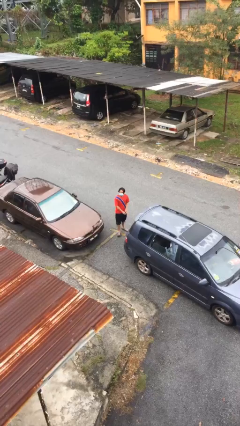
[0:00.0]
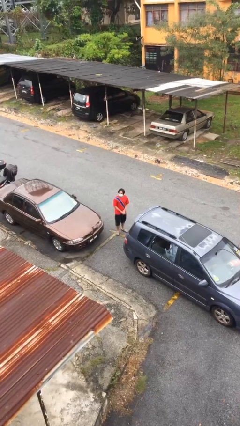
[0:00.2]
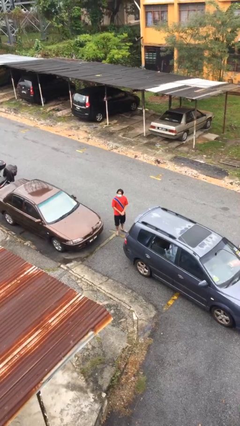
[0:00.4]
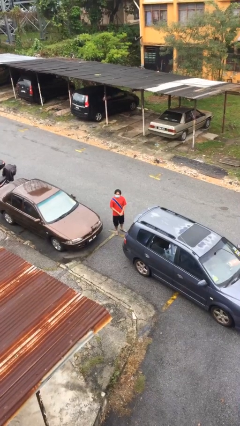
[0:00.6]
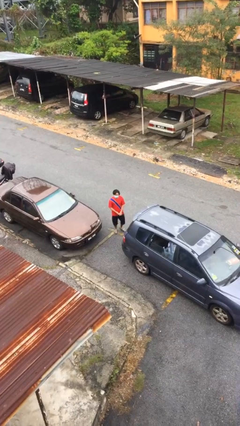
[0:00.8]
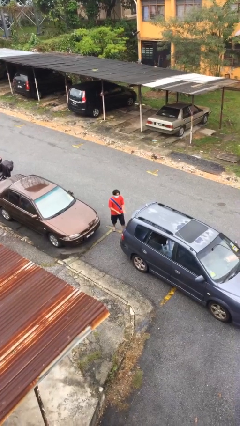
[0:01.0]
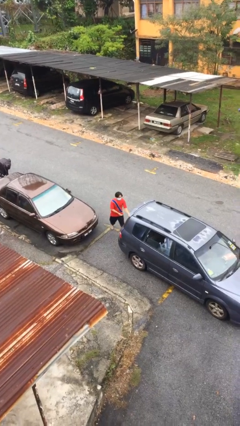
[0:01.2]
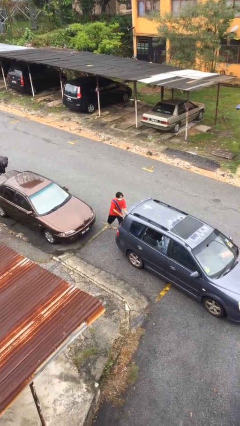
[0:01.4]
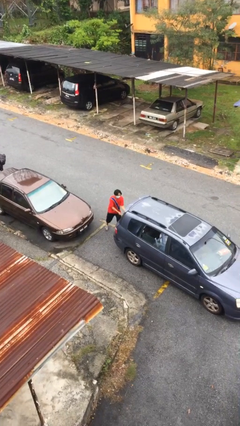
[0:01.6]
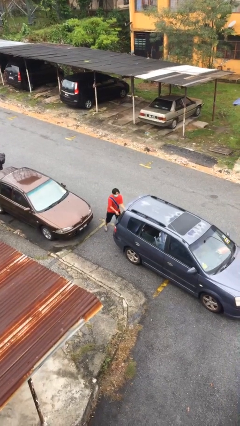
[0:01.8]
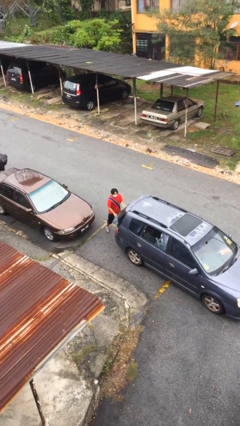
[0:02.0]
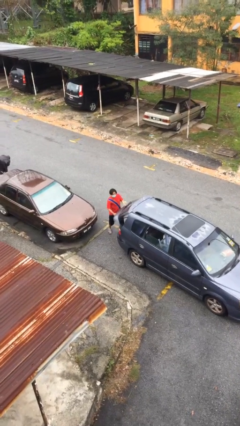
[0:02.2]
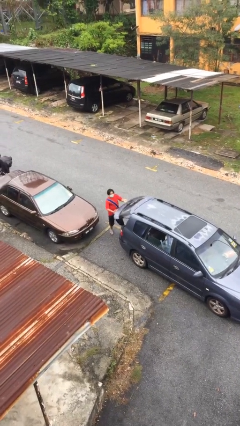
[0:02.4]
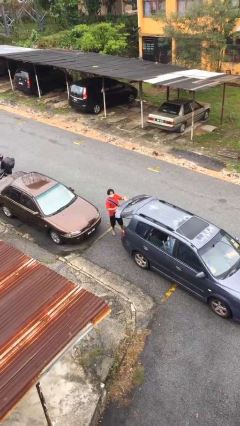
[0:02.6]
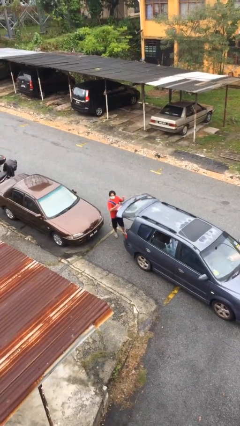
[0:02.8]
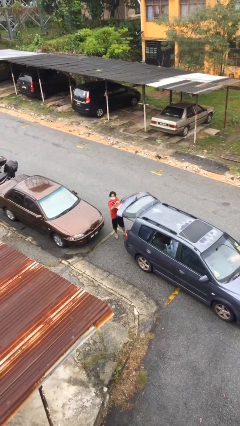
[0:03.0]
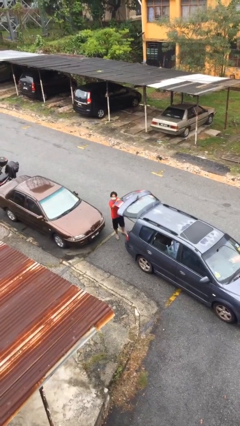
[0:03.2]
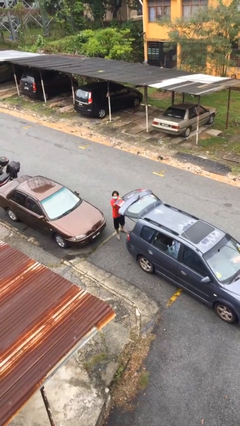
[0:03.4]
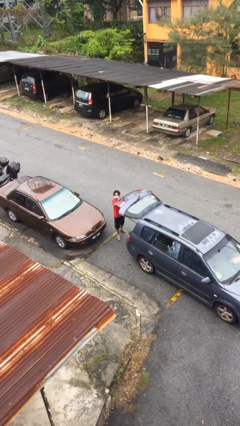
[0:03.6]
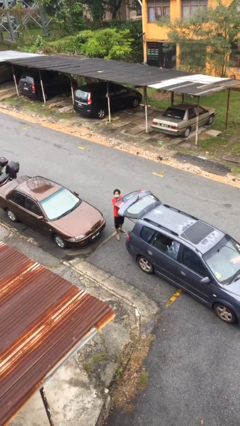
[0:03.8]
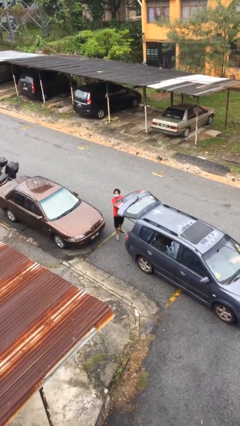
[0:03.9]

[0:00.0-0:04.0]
person opens car trunk

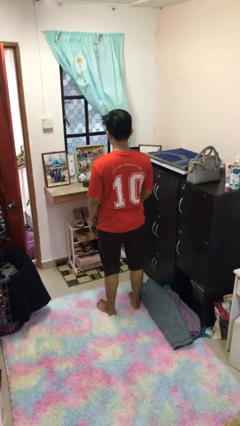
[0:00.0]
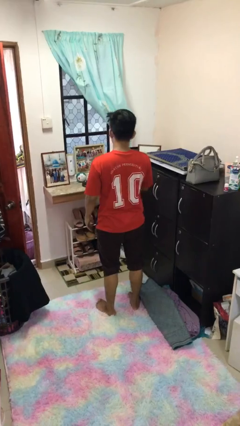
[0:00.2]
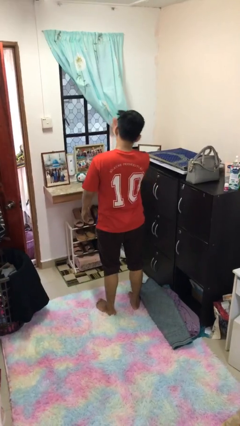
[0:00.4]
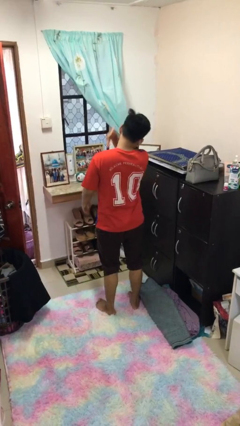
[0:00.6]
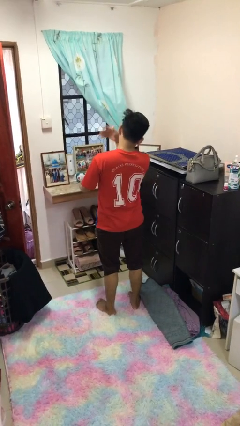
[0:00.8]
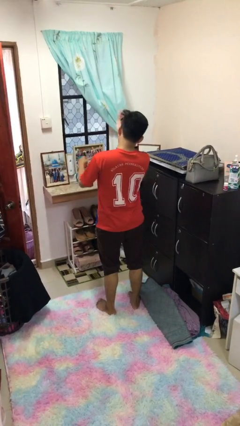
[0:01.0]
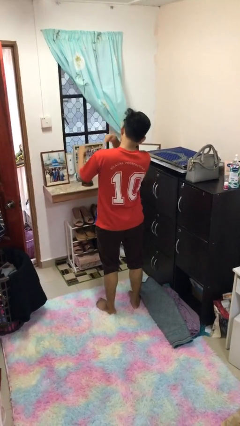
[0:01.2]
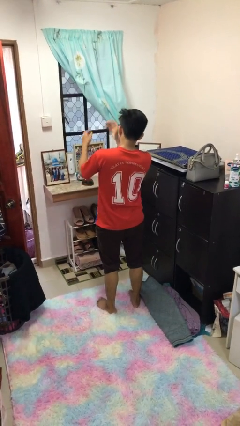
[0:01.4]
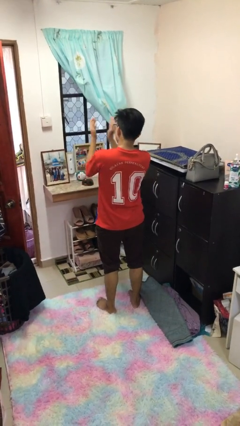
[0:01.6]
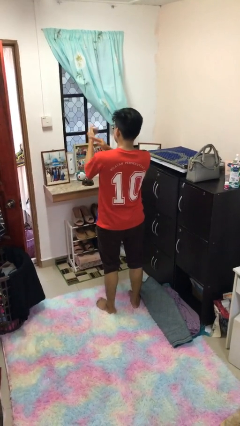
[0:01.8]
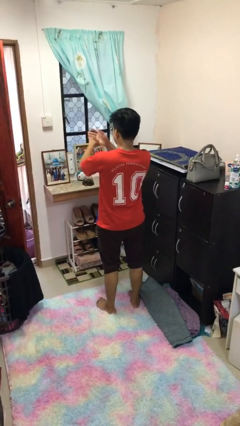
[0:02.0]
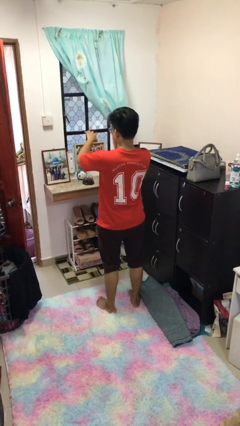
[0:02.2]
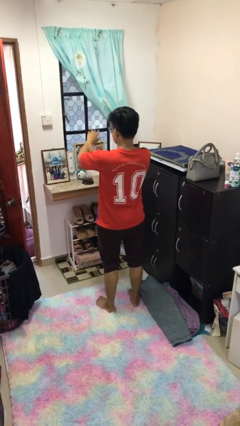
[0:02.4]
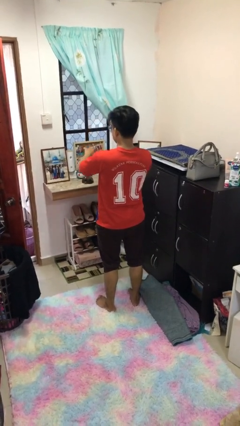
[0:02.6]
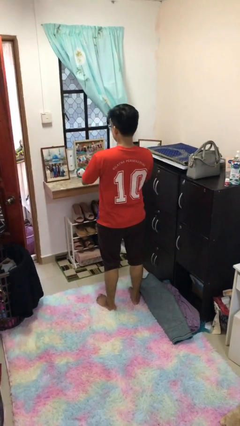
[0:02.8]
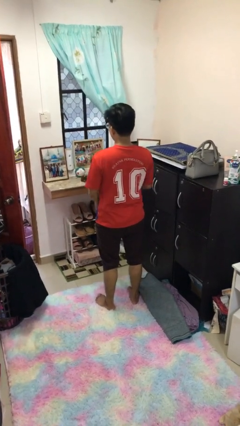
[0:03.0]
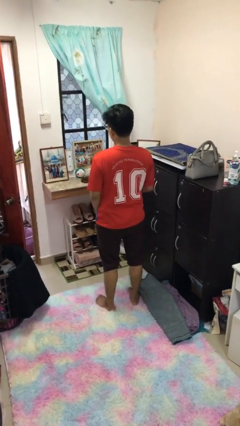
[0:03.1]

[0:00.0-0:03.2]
person swats bug

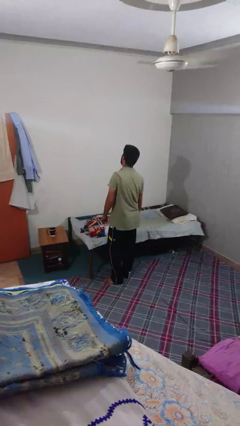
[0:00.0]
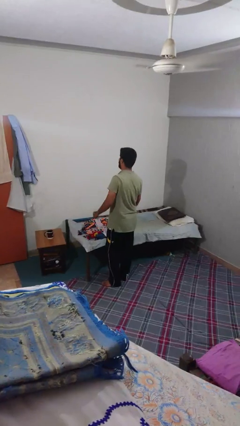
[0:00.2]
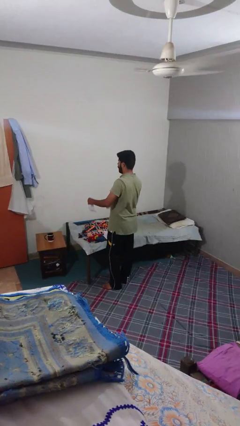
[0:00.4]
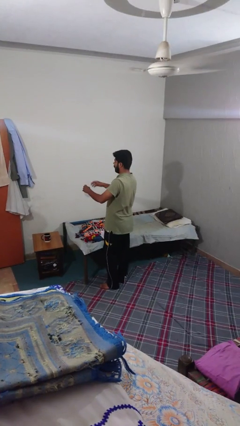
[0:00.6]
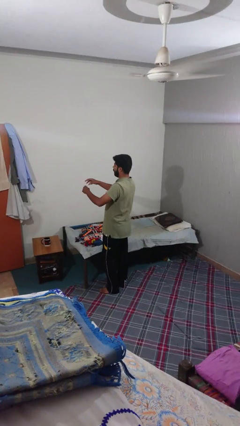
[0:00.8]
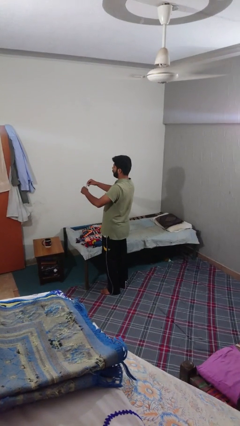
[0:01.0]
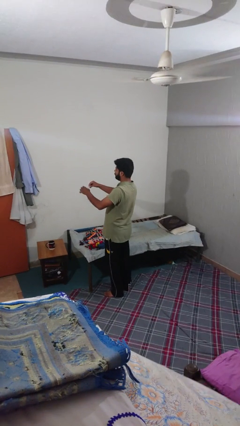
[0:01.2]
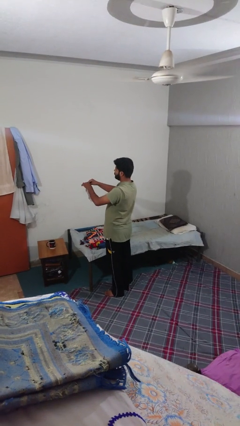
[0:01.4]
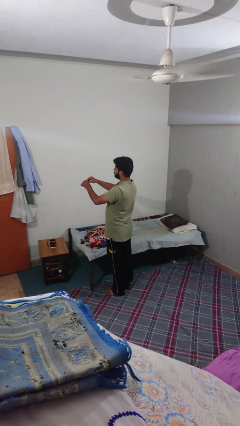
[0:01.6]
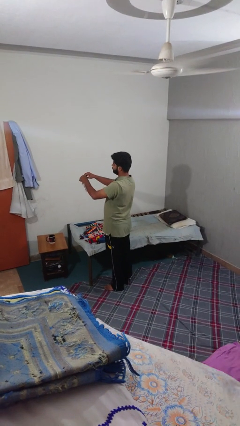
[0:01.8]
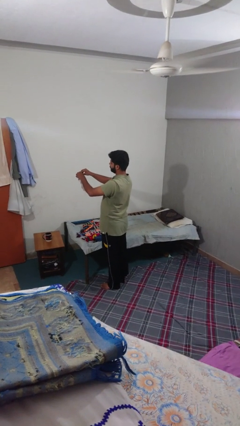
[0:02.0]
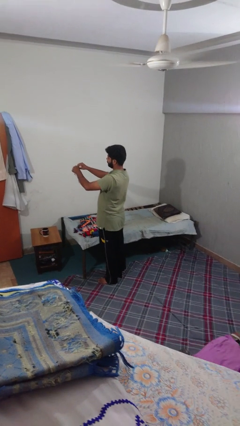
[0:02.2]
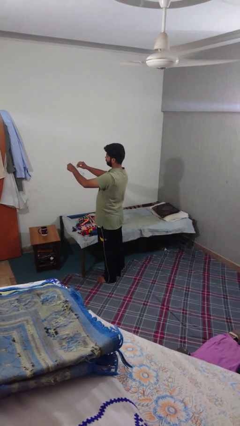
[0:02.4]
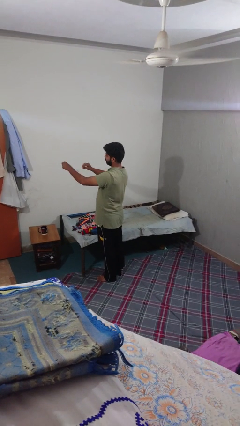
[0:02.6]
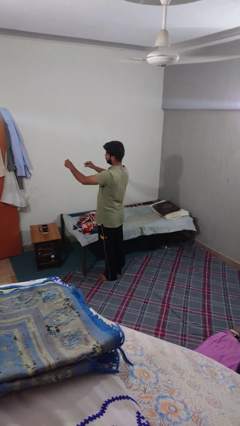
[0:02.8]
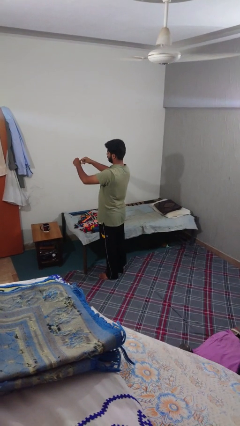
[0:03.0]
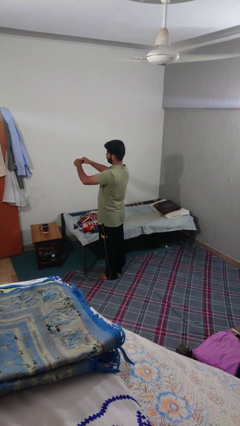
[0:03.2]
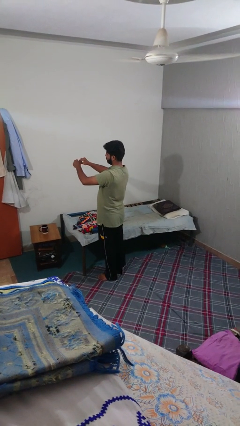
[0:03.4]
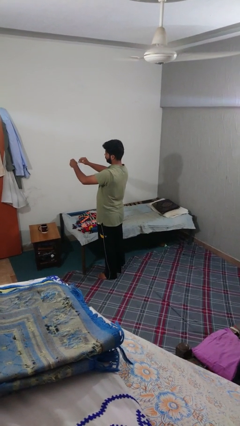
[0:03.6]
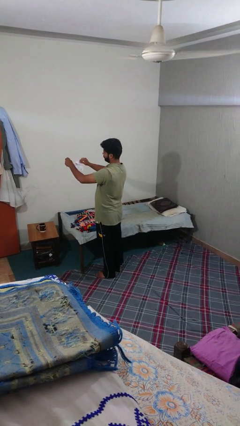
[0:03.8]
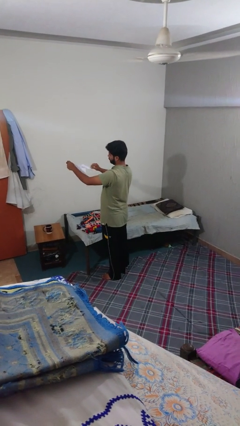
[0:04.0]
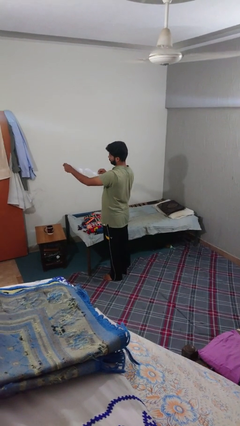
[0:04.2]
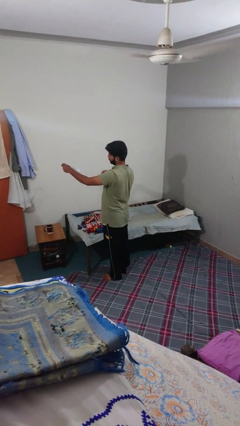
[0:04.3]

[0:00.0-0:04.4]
person tears paper

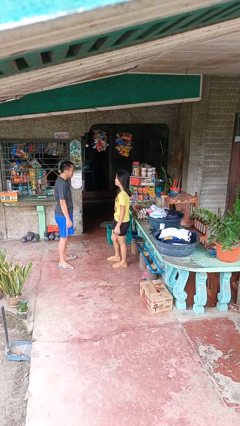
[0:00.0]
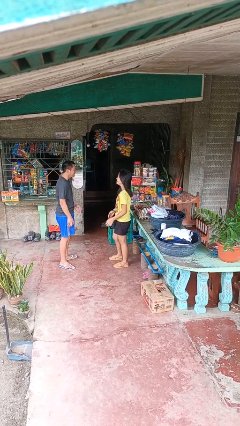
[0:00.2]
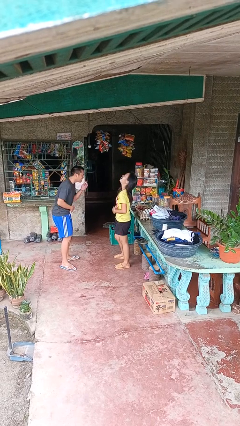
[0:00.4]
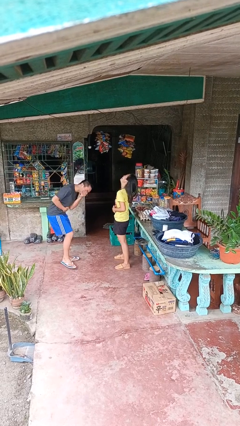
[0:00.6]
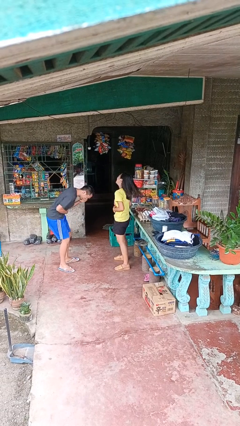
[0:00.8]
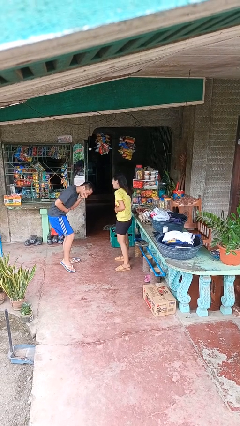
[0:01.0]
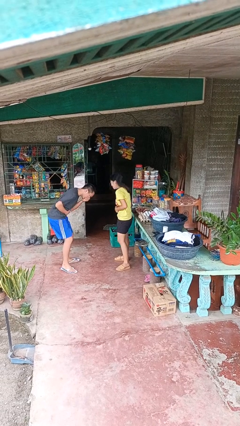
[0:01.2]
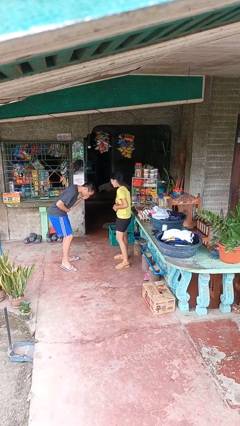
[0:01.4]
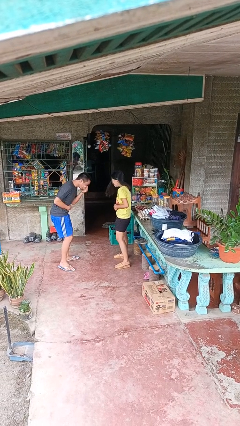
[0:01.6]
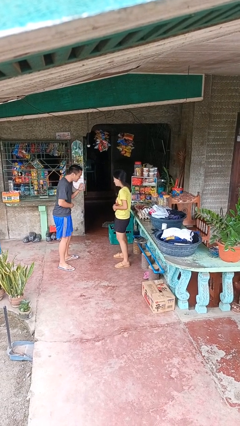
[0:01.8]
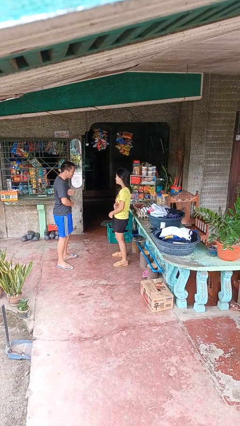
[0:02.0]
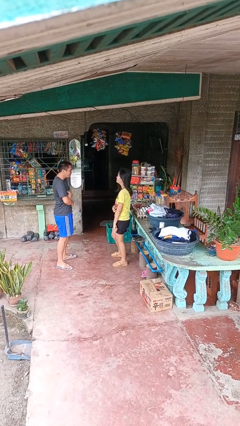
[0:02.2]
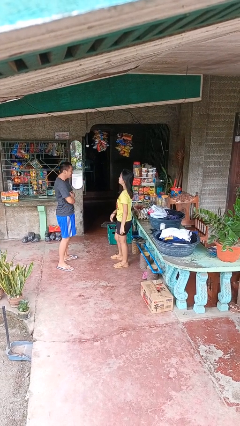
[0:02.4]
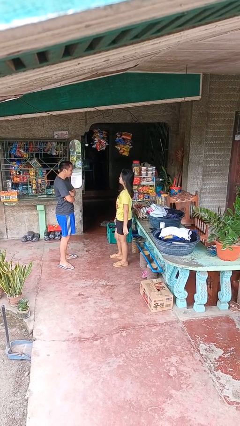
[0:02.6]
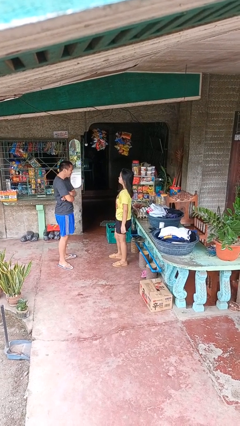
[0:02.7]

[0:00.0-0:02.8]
person laughs with person

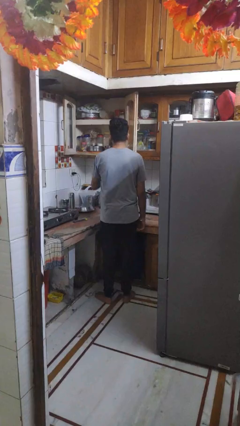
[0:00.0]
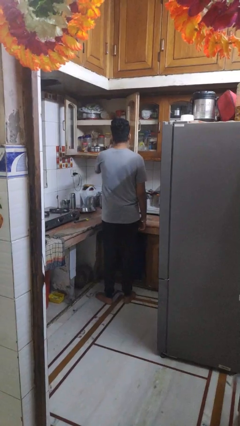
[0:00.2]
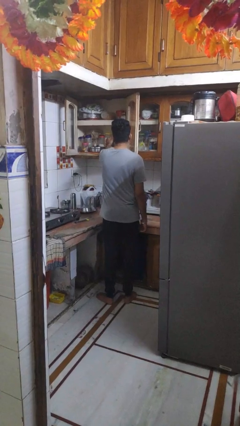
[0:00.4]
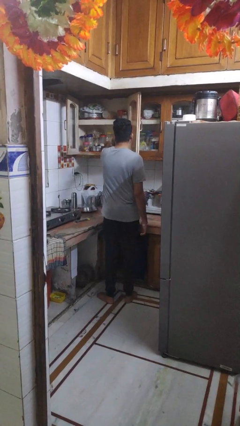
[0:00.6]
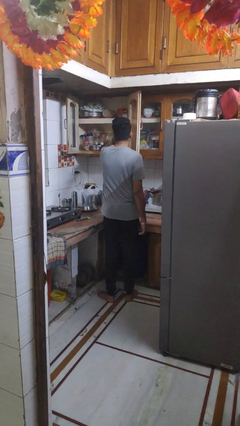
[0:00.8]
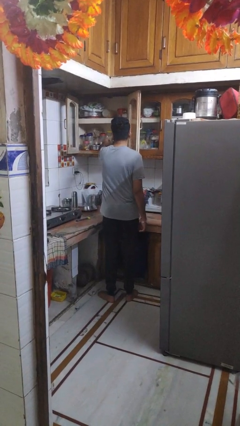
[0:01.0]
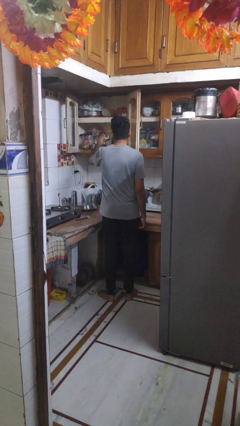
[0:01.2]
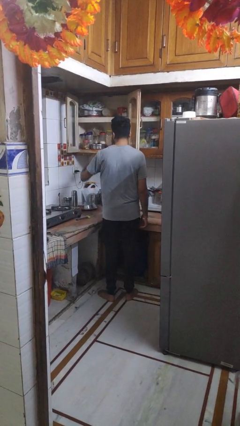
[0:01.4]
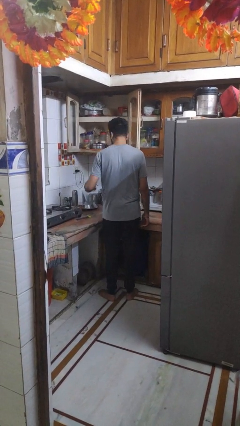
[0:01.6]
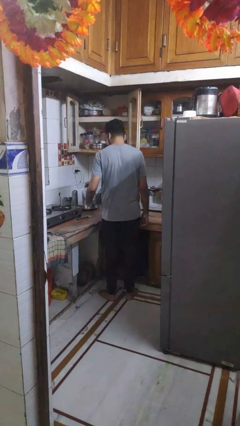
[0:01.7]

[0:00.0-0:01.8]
person takes object from cabinet

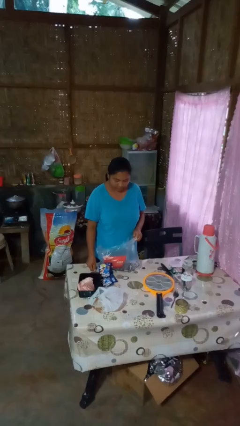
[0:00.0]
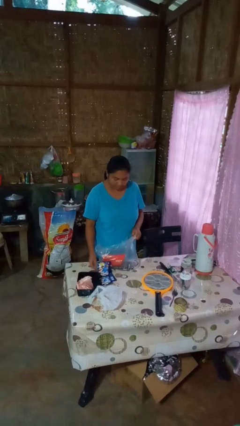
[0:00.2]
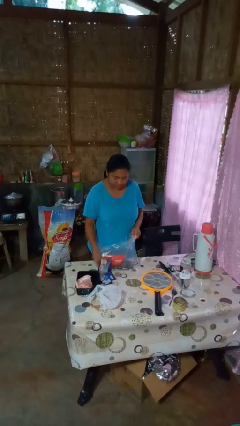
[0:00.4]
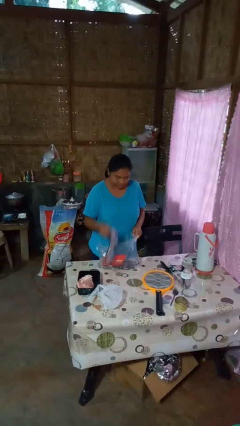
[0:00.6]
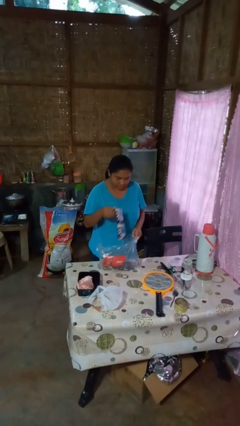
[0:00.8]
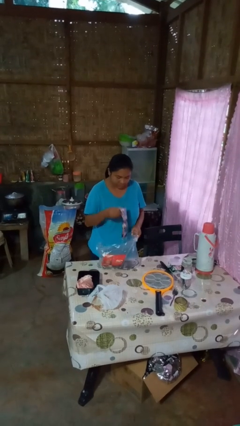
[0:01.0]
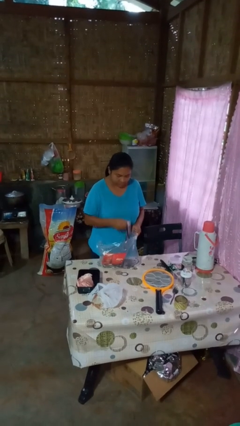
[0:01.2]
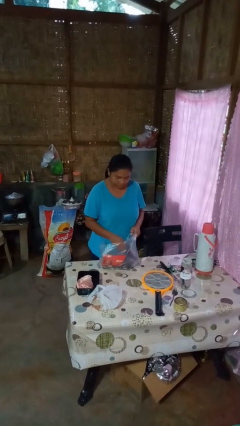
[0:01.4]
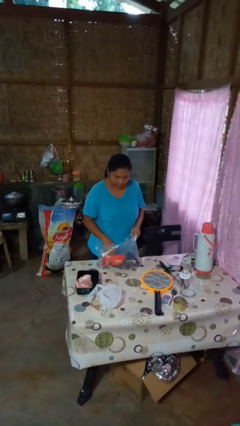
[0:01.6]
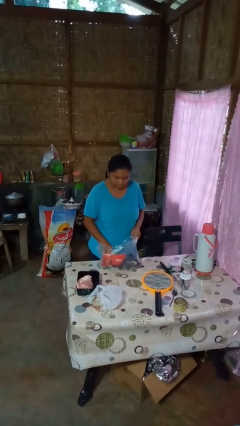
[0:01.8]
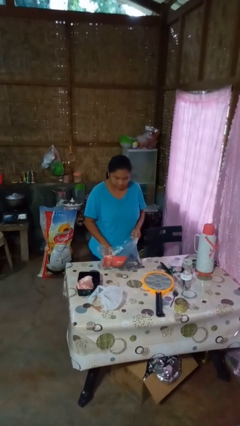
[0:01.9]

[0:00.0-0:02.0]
person puts object into bag
